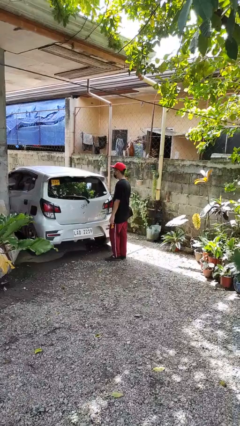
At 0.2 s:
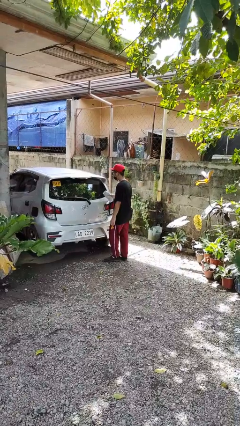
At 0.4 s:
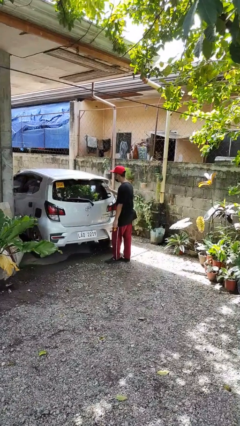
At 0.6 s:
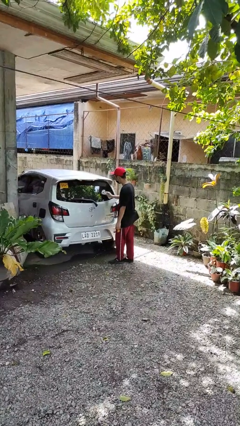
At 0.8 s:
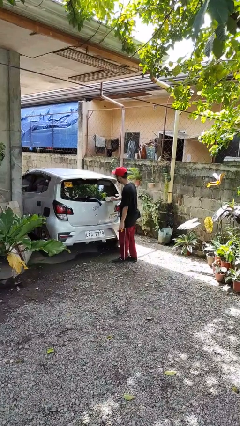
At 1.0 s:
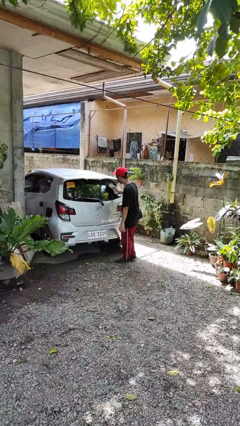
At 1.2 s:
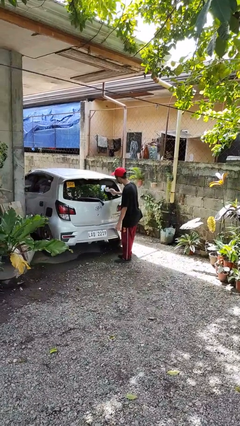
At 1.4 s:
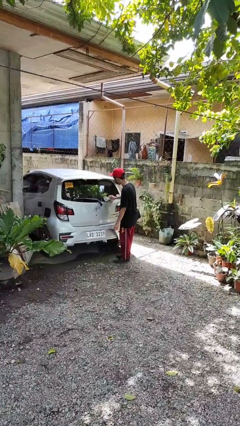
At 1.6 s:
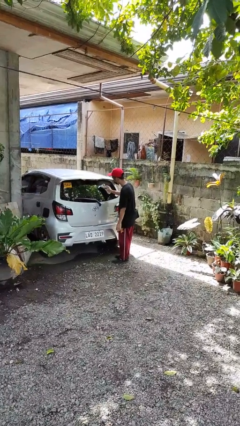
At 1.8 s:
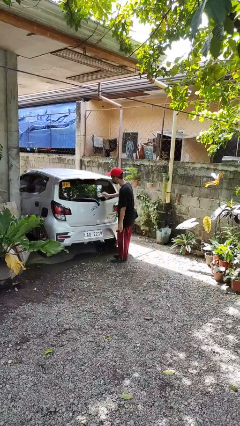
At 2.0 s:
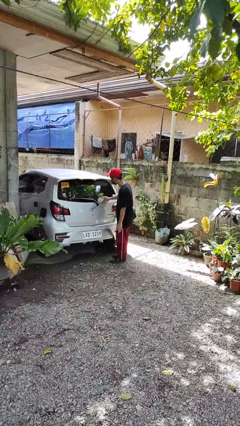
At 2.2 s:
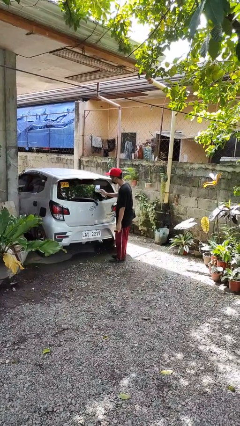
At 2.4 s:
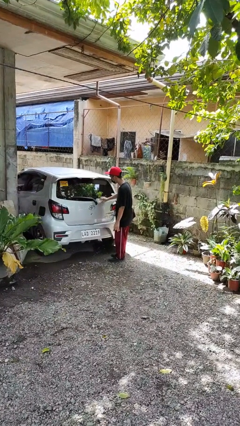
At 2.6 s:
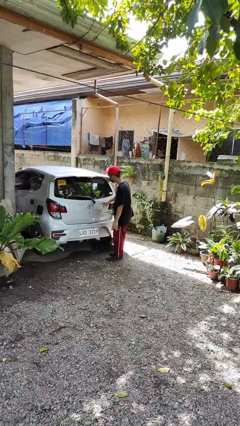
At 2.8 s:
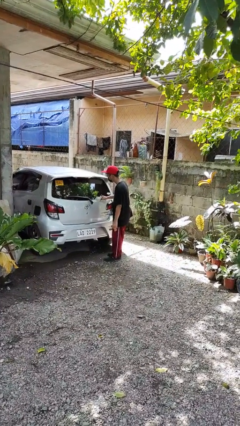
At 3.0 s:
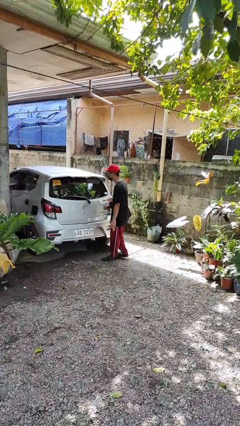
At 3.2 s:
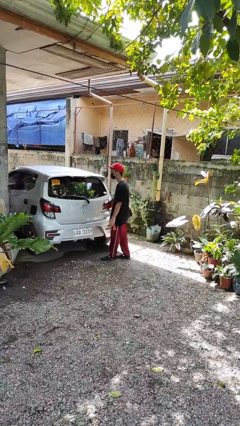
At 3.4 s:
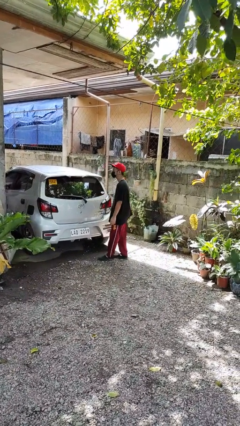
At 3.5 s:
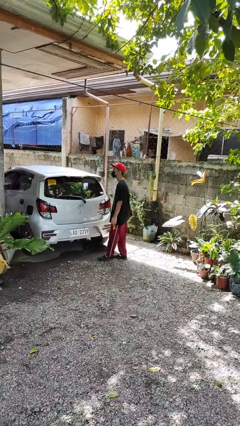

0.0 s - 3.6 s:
person polishes car with rag

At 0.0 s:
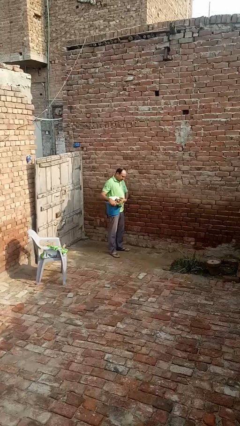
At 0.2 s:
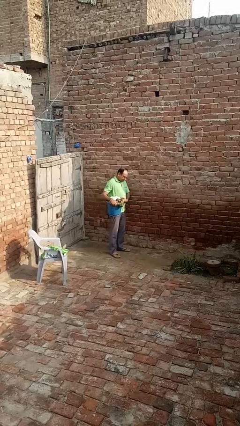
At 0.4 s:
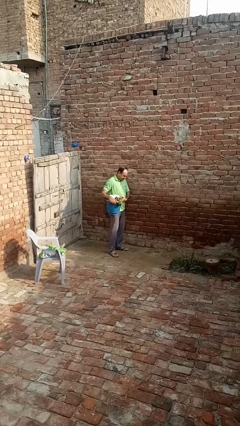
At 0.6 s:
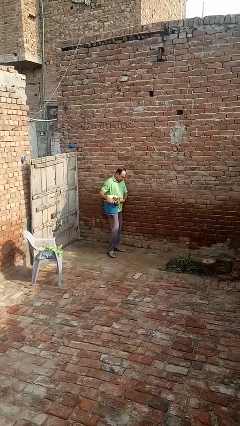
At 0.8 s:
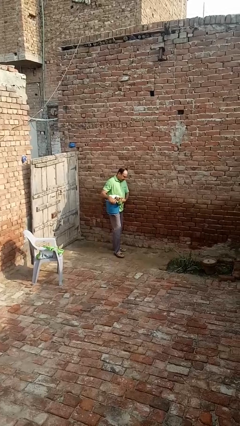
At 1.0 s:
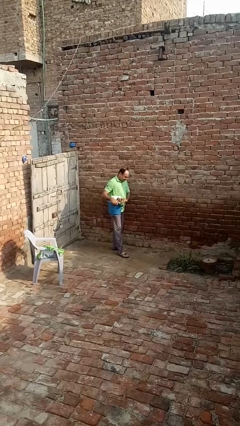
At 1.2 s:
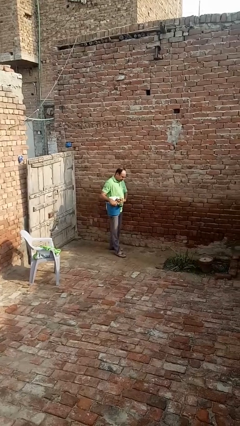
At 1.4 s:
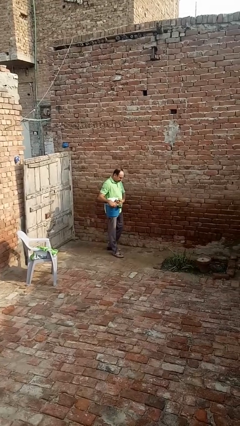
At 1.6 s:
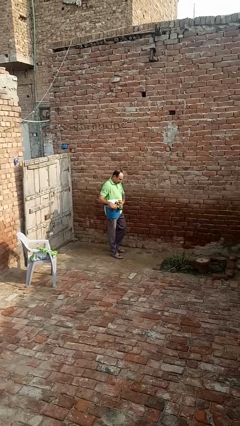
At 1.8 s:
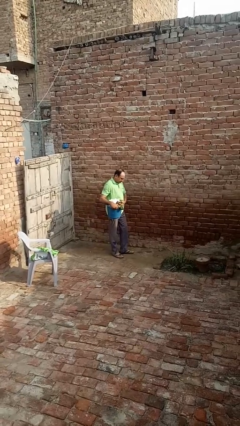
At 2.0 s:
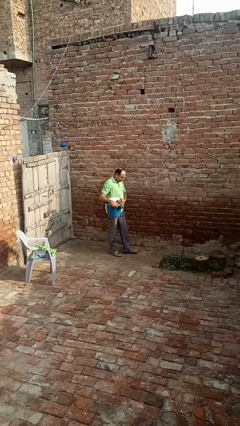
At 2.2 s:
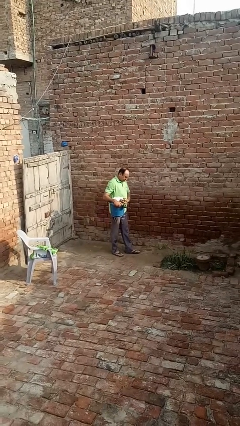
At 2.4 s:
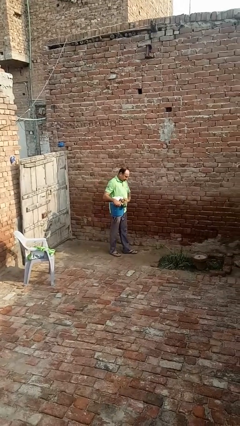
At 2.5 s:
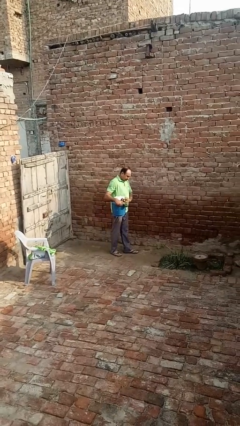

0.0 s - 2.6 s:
person carries laundry basket

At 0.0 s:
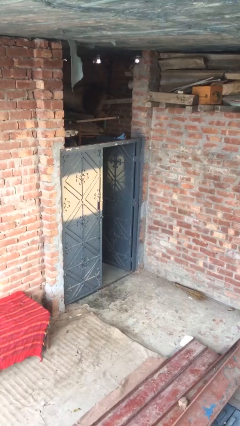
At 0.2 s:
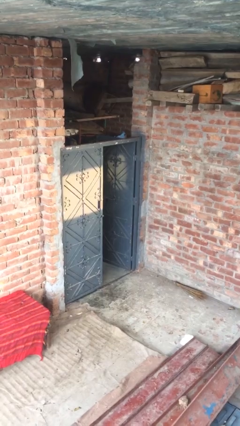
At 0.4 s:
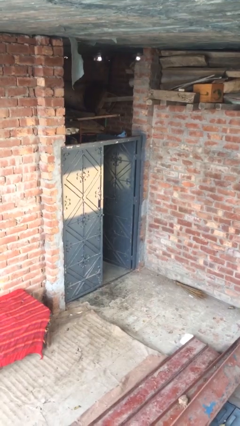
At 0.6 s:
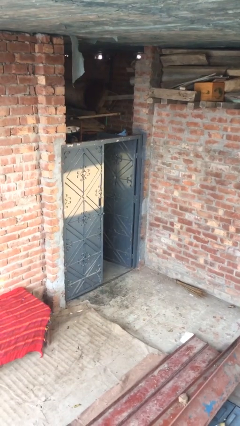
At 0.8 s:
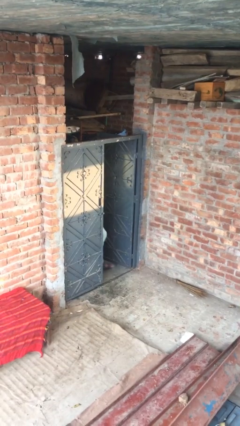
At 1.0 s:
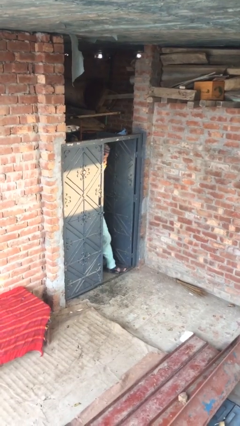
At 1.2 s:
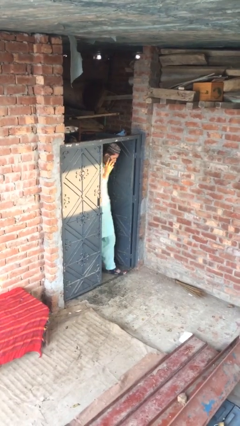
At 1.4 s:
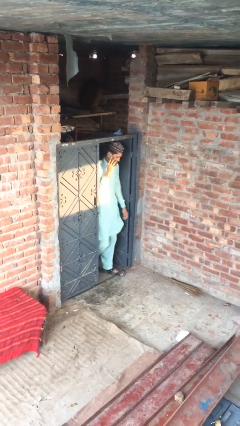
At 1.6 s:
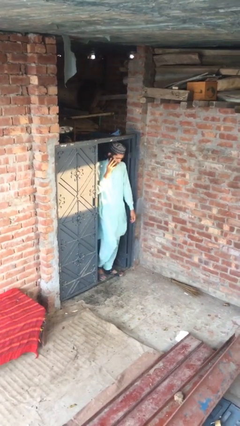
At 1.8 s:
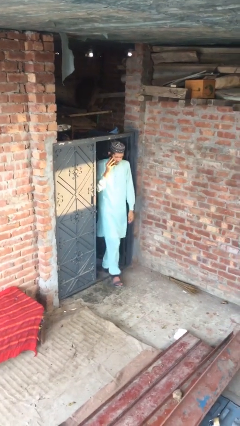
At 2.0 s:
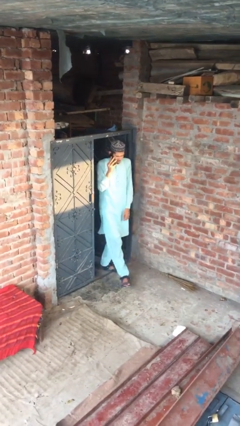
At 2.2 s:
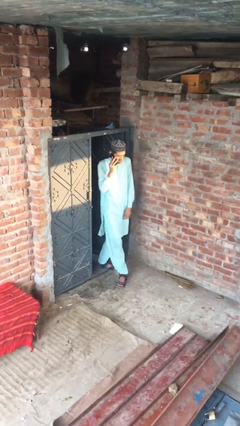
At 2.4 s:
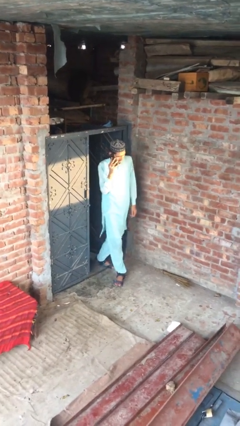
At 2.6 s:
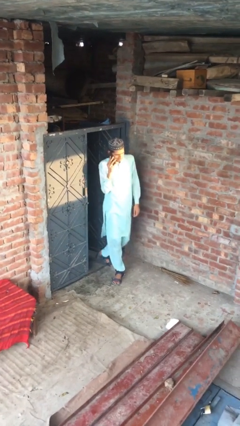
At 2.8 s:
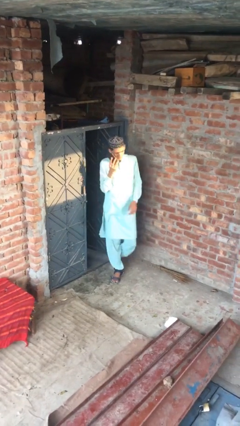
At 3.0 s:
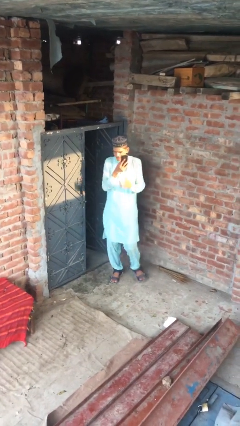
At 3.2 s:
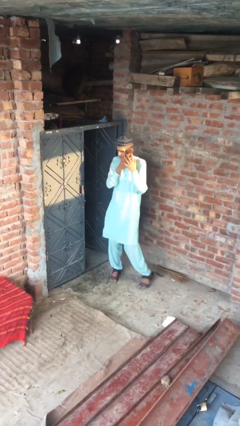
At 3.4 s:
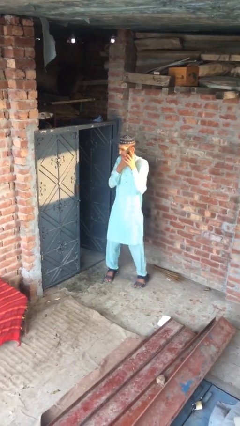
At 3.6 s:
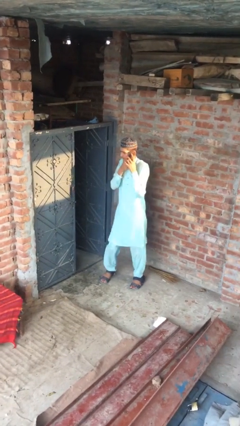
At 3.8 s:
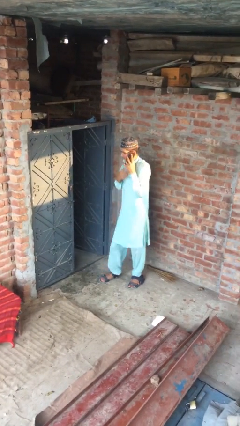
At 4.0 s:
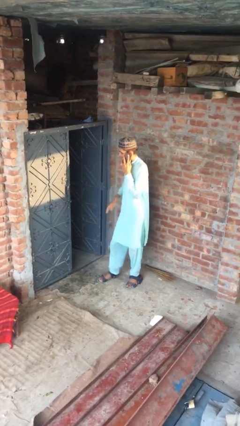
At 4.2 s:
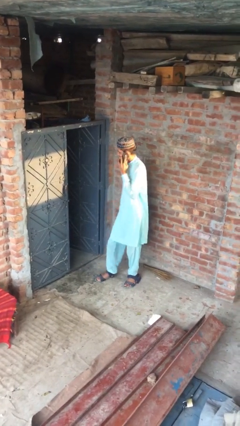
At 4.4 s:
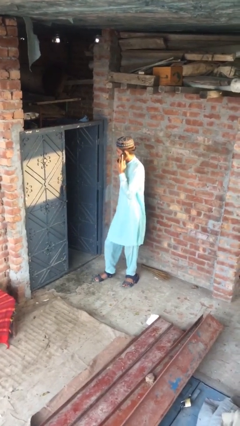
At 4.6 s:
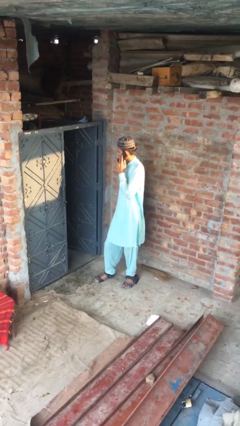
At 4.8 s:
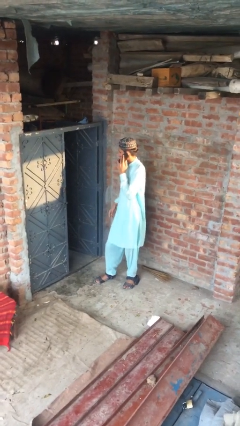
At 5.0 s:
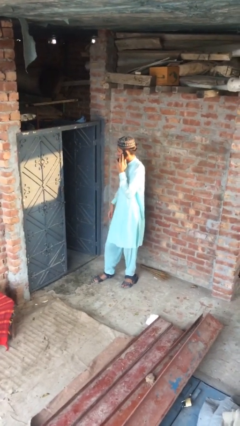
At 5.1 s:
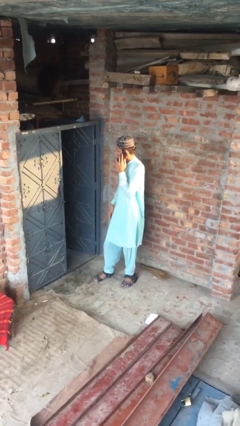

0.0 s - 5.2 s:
person enters scene through structure

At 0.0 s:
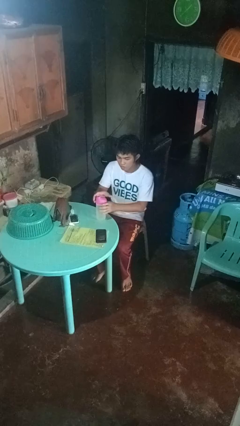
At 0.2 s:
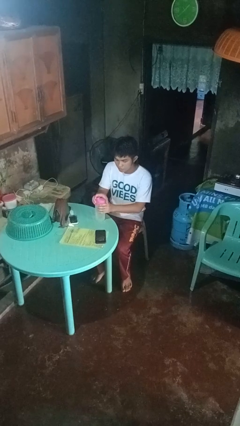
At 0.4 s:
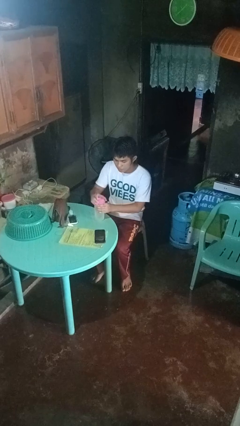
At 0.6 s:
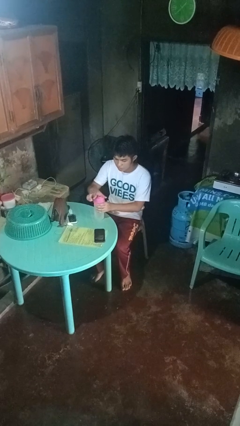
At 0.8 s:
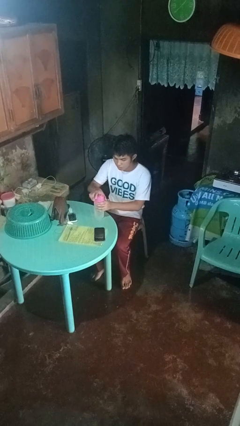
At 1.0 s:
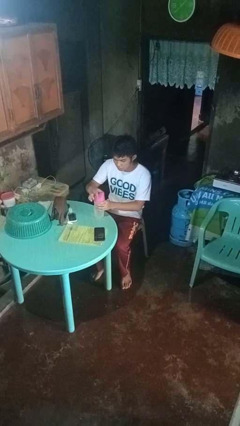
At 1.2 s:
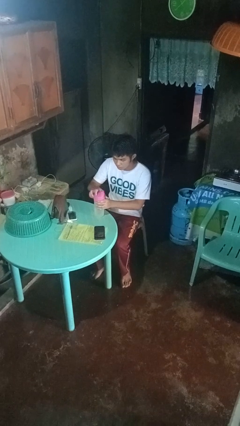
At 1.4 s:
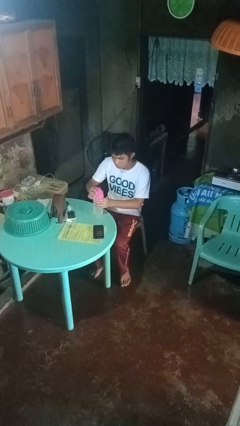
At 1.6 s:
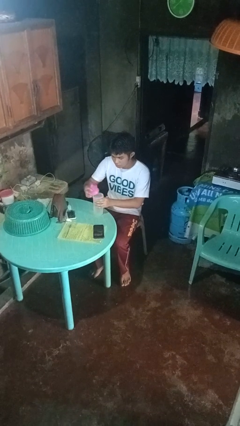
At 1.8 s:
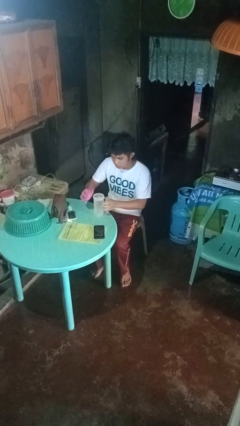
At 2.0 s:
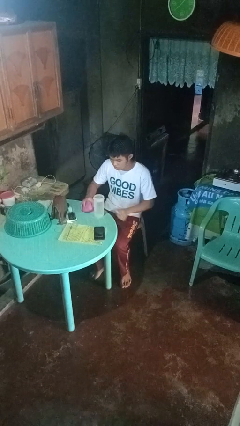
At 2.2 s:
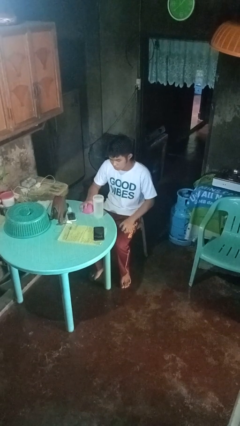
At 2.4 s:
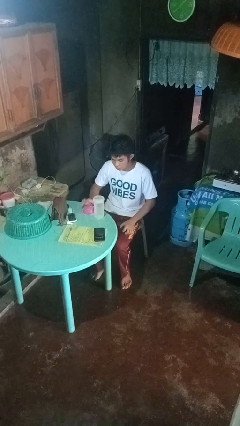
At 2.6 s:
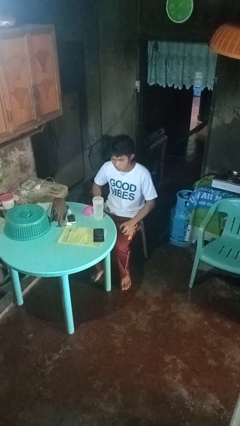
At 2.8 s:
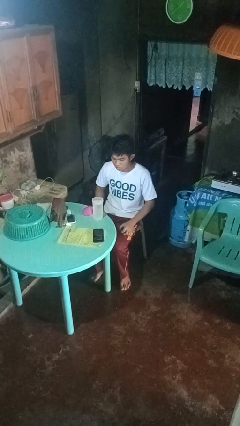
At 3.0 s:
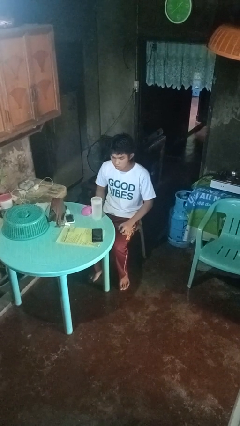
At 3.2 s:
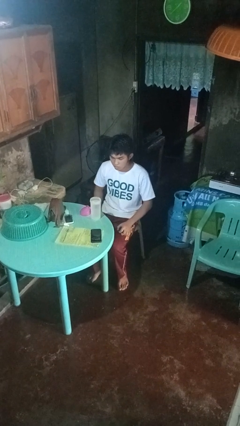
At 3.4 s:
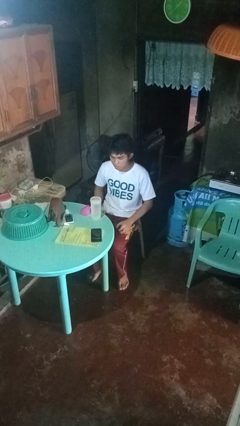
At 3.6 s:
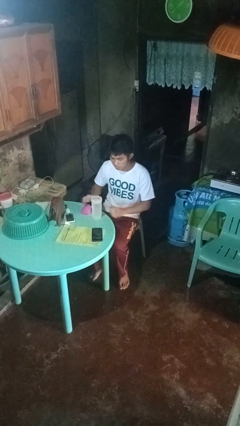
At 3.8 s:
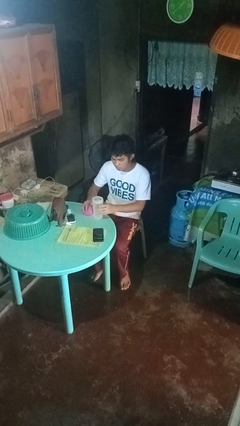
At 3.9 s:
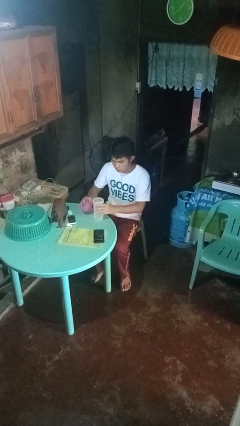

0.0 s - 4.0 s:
person unscrews lid from bottle

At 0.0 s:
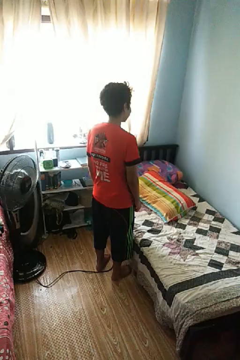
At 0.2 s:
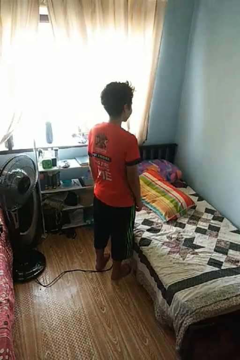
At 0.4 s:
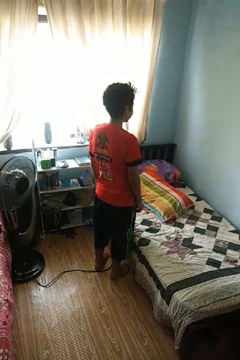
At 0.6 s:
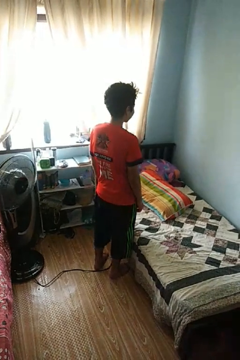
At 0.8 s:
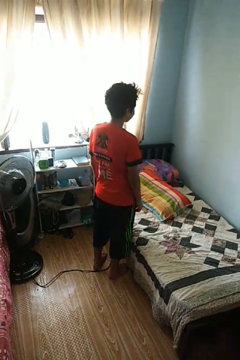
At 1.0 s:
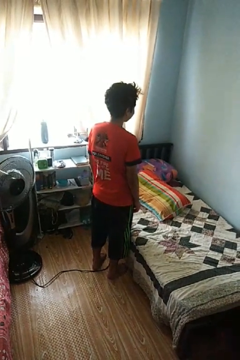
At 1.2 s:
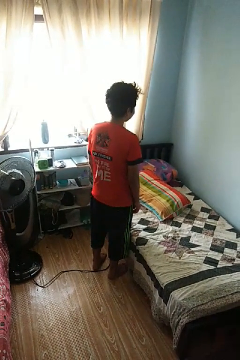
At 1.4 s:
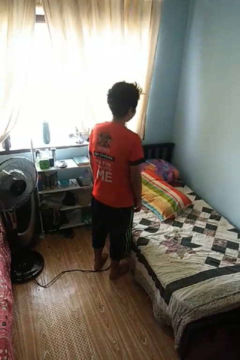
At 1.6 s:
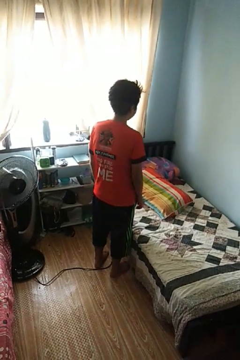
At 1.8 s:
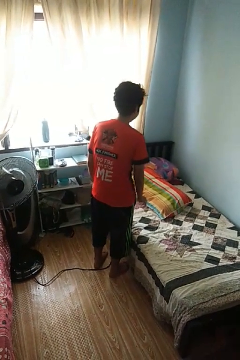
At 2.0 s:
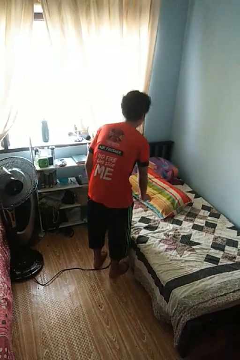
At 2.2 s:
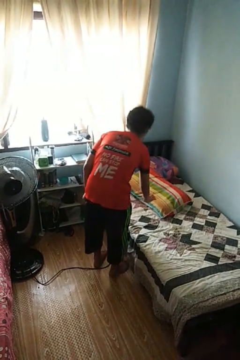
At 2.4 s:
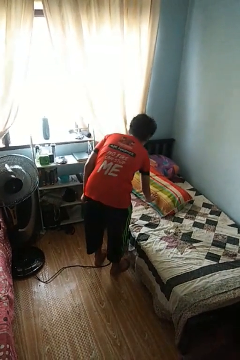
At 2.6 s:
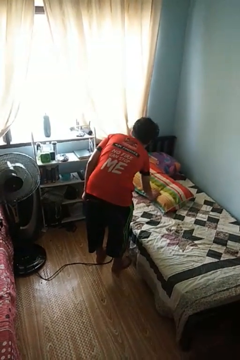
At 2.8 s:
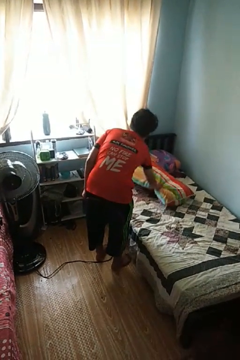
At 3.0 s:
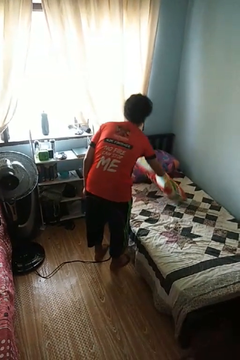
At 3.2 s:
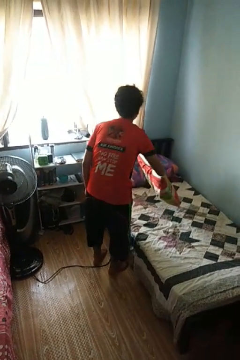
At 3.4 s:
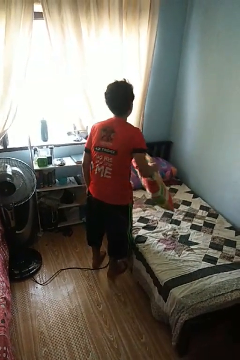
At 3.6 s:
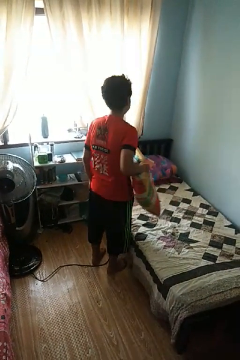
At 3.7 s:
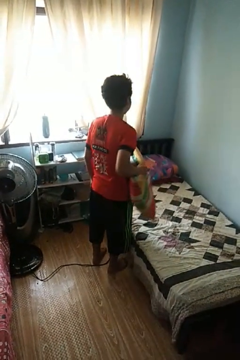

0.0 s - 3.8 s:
person picks up object from bed
